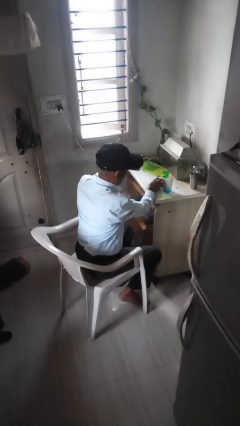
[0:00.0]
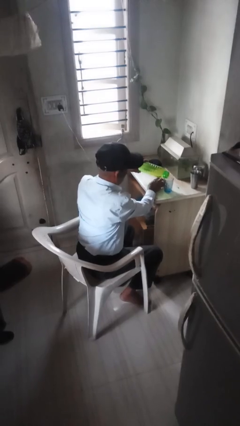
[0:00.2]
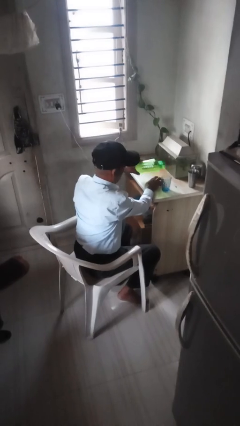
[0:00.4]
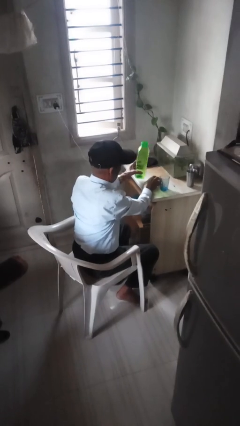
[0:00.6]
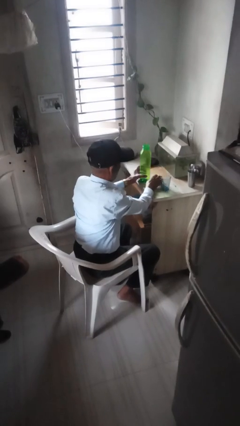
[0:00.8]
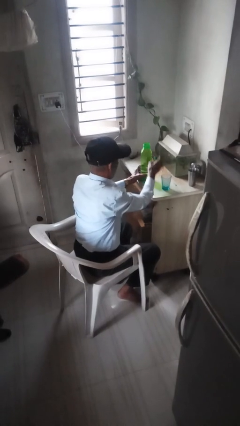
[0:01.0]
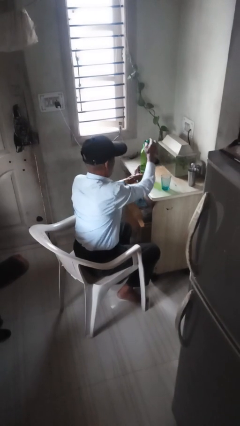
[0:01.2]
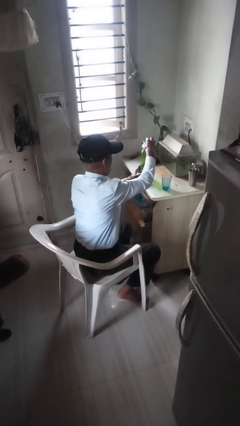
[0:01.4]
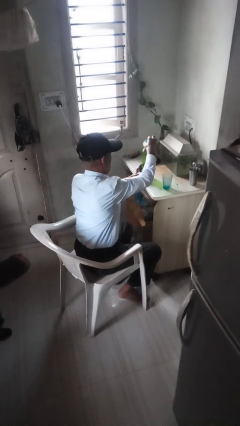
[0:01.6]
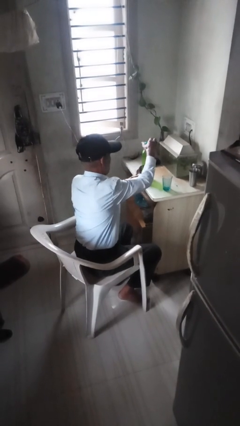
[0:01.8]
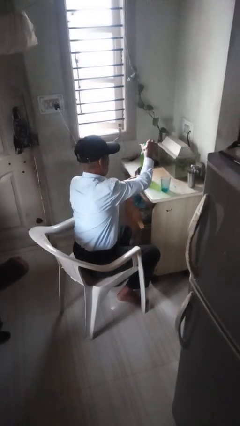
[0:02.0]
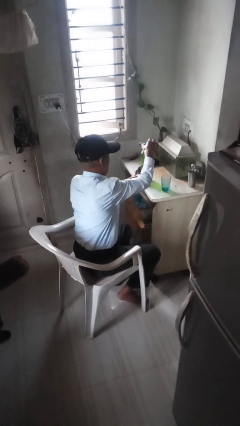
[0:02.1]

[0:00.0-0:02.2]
person screws lid to bottle

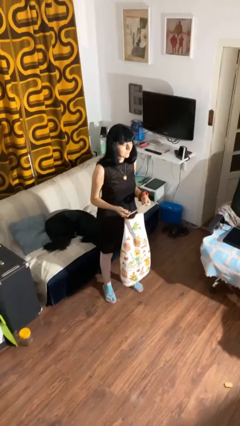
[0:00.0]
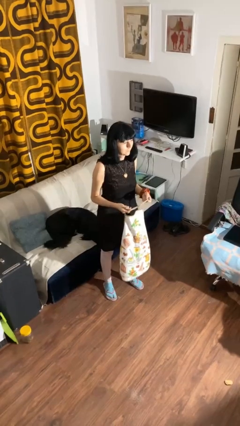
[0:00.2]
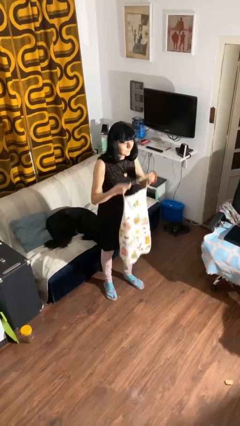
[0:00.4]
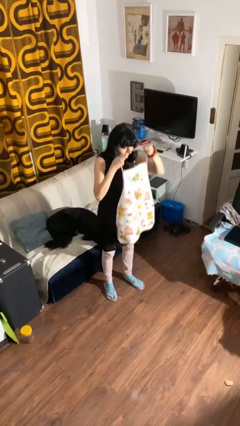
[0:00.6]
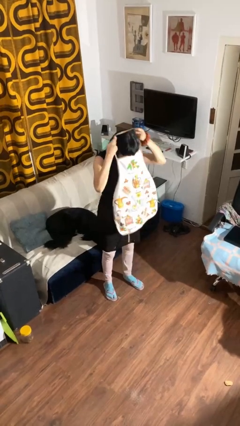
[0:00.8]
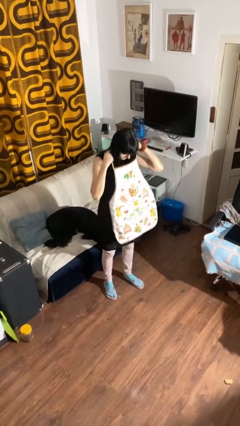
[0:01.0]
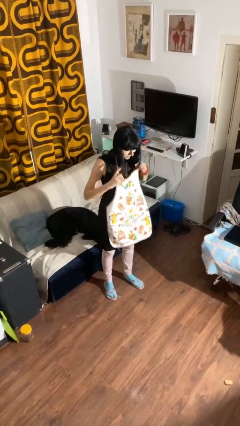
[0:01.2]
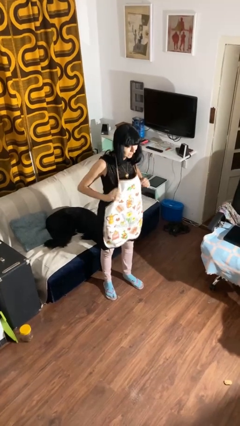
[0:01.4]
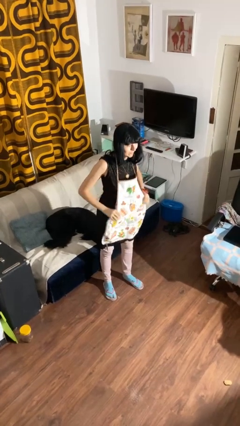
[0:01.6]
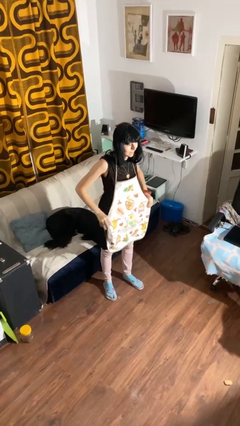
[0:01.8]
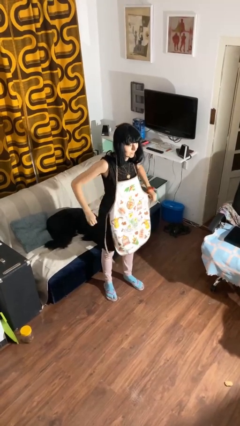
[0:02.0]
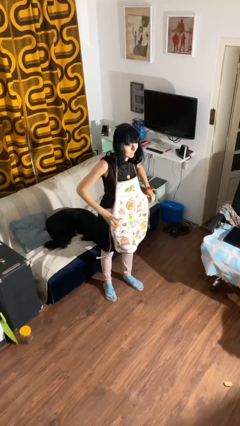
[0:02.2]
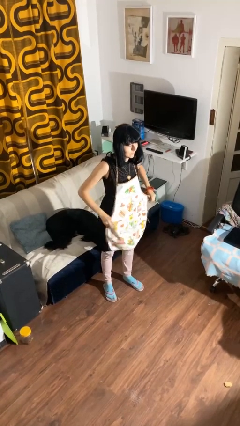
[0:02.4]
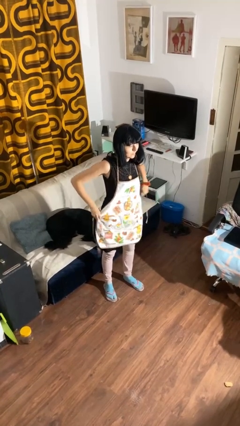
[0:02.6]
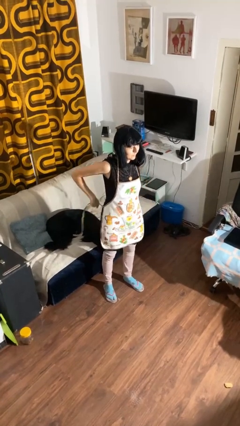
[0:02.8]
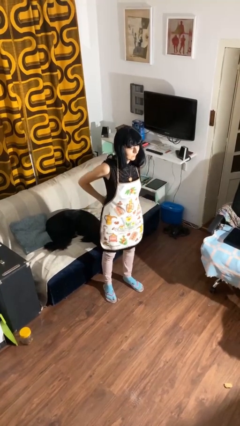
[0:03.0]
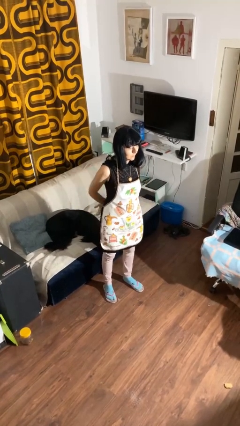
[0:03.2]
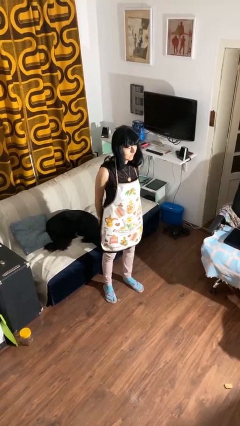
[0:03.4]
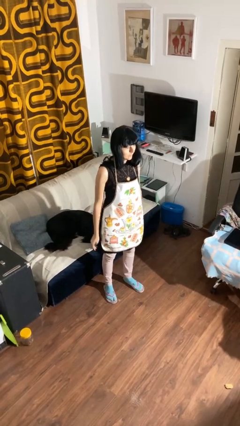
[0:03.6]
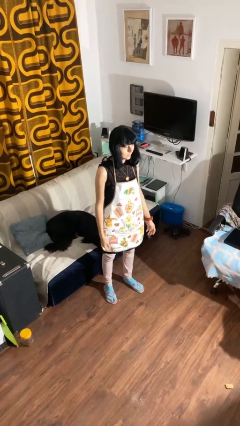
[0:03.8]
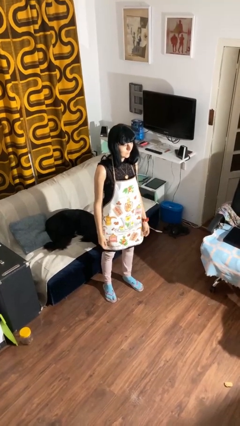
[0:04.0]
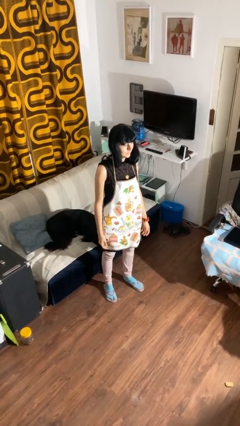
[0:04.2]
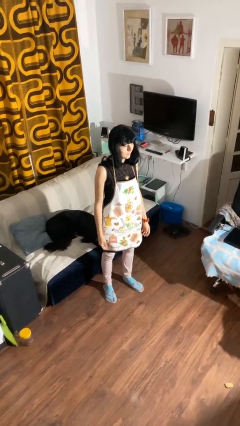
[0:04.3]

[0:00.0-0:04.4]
person puts on apron

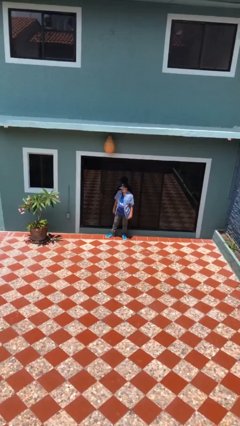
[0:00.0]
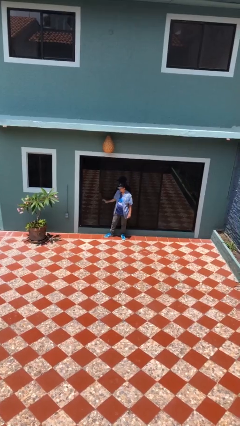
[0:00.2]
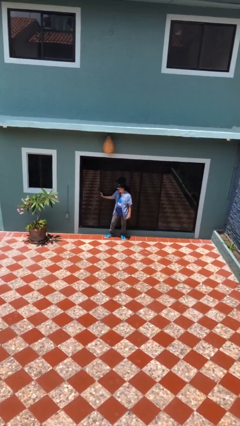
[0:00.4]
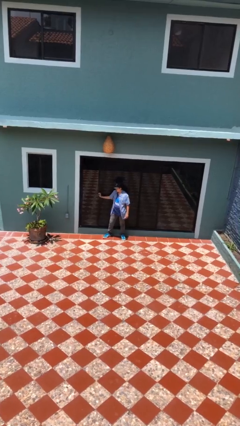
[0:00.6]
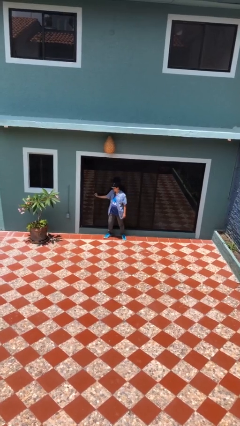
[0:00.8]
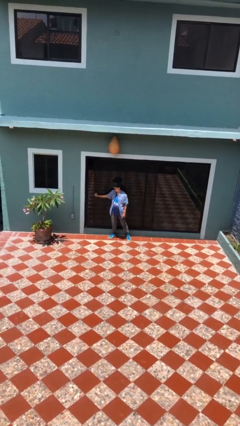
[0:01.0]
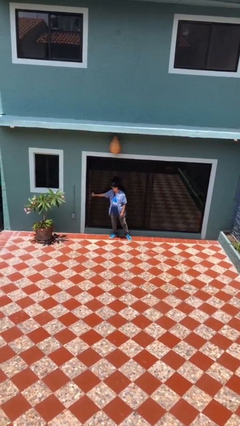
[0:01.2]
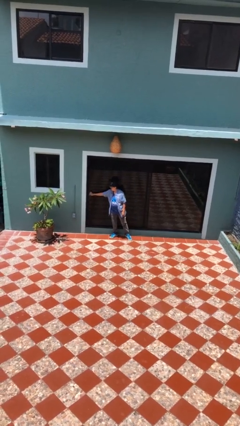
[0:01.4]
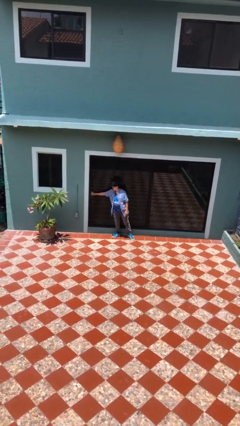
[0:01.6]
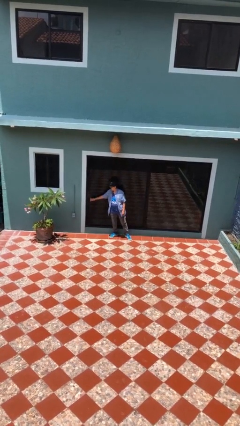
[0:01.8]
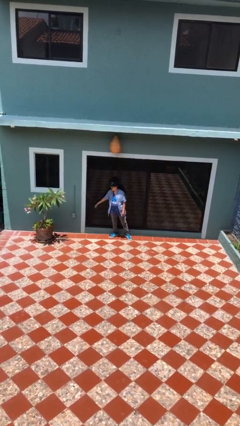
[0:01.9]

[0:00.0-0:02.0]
person closes sliding door

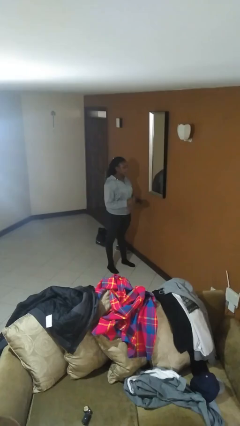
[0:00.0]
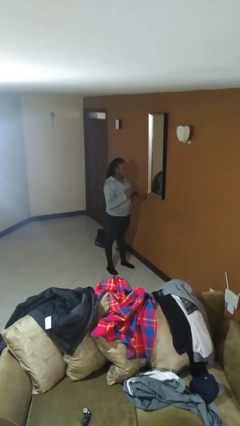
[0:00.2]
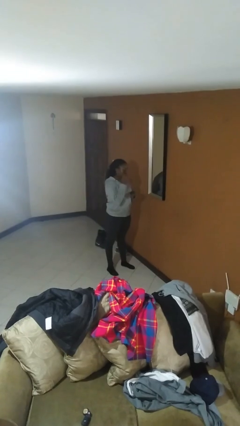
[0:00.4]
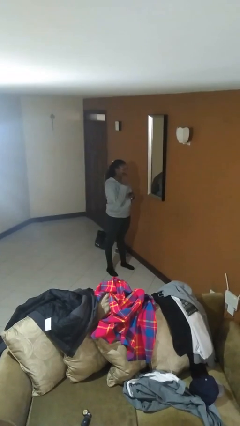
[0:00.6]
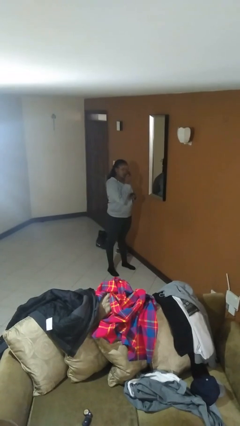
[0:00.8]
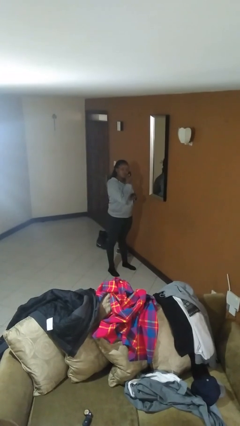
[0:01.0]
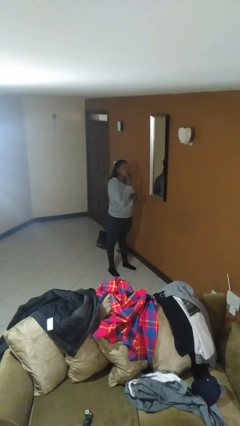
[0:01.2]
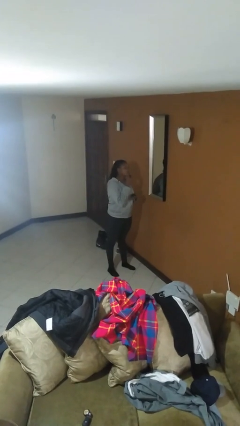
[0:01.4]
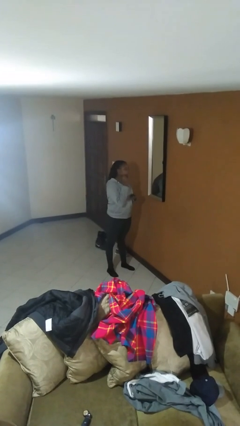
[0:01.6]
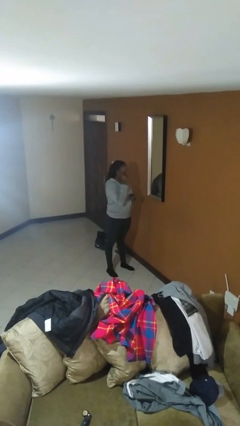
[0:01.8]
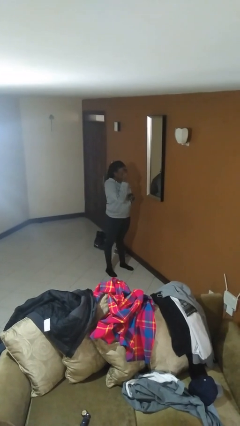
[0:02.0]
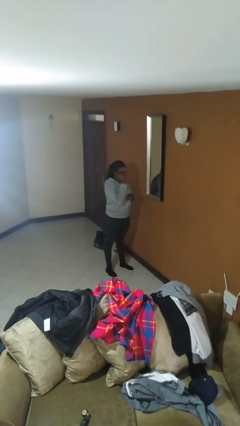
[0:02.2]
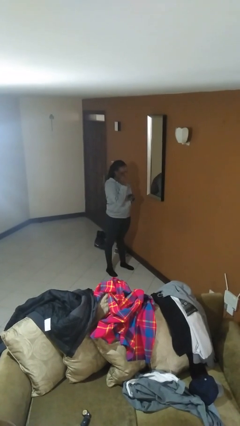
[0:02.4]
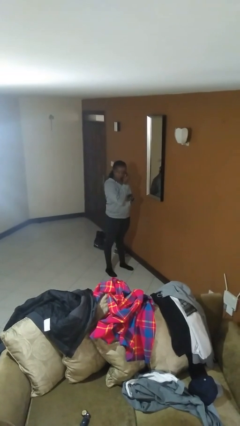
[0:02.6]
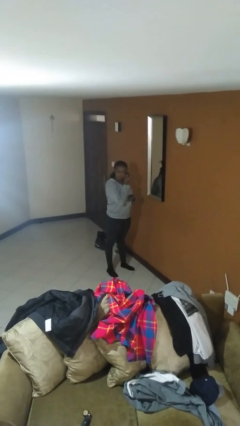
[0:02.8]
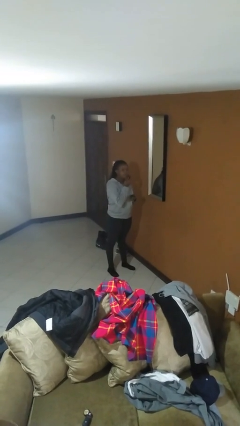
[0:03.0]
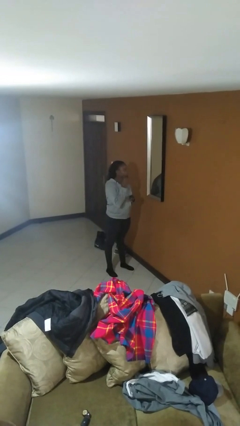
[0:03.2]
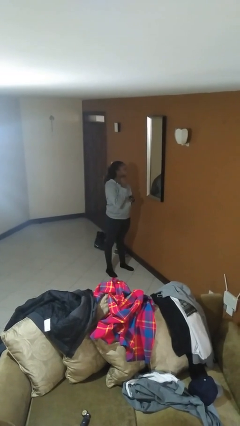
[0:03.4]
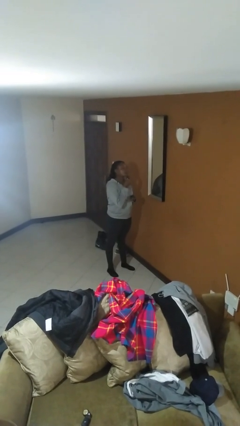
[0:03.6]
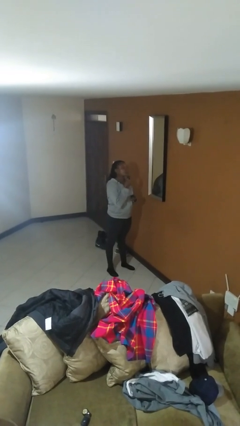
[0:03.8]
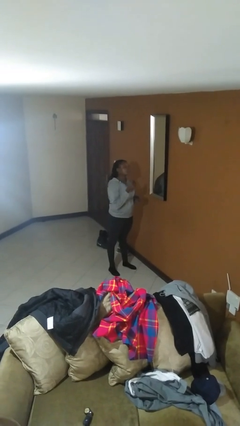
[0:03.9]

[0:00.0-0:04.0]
person applies foundation makeup

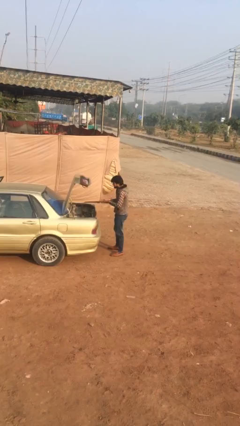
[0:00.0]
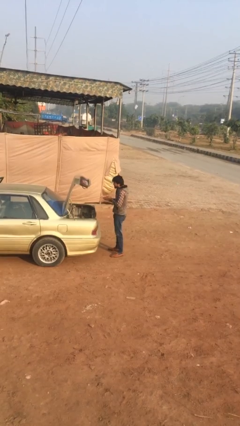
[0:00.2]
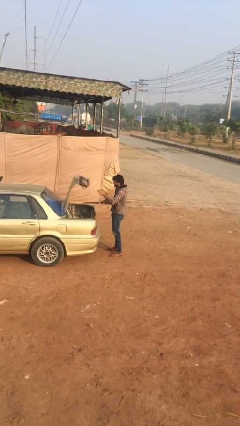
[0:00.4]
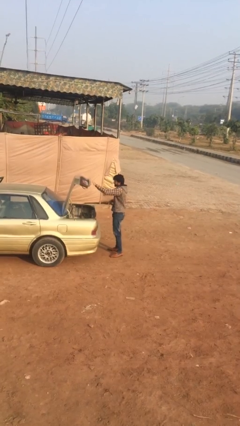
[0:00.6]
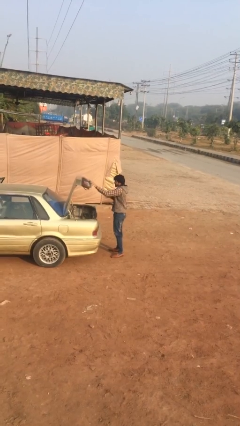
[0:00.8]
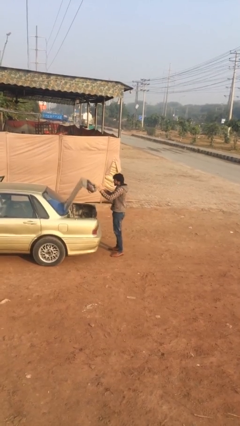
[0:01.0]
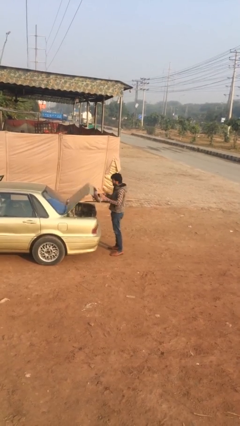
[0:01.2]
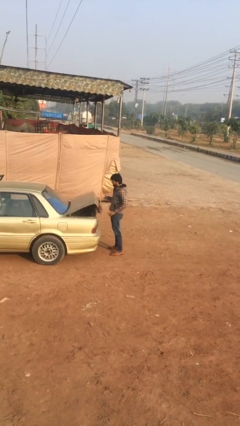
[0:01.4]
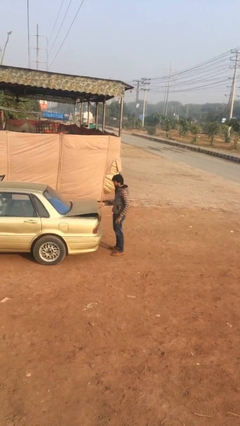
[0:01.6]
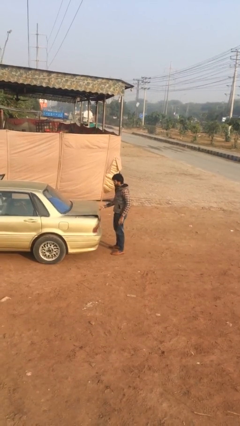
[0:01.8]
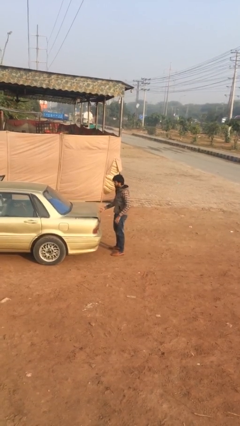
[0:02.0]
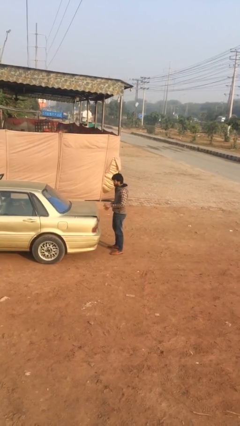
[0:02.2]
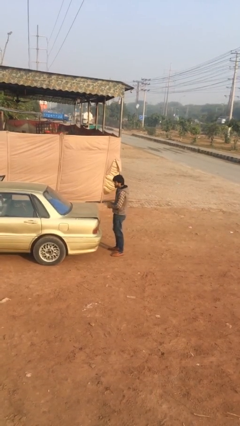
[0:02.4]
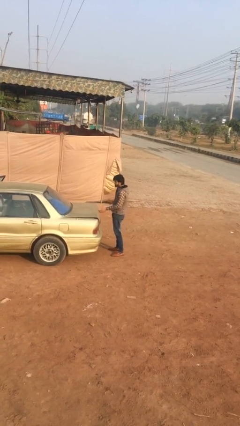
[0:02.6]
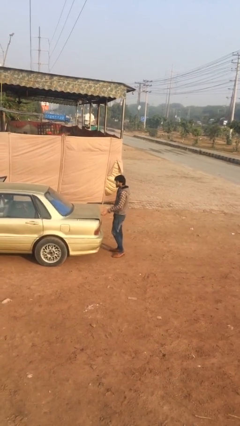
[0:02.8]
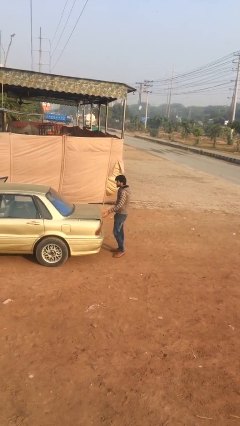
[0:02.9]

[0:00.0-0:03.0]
person closes car trunk

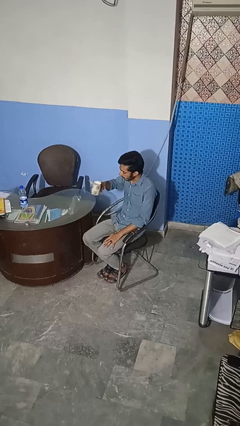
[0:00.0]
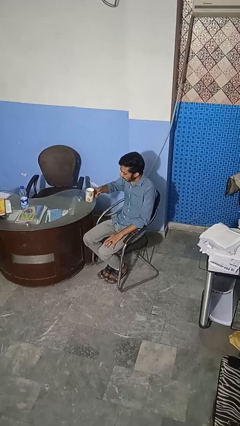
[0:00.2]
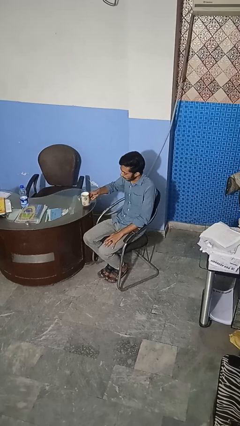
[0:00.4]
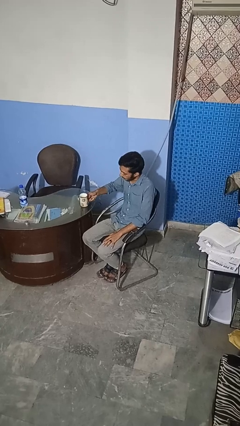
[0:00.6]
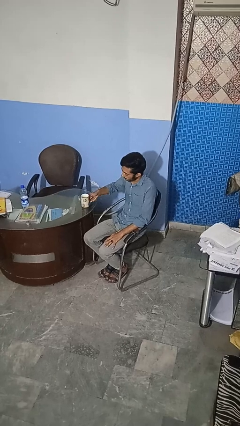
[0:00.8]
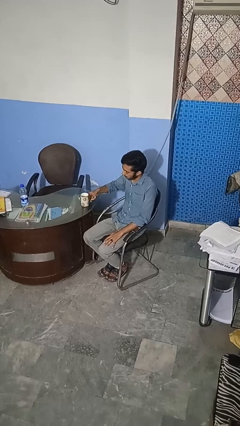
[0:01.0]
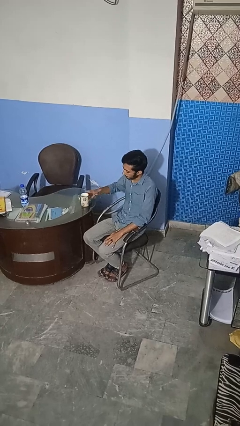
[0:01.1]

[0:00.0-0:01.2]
person puts down object on table

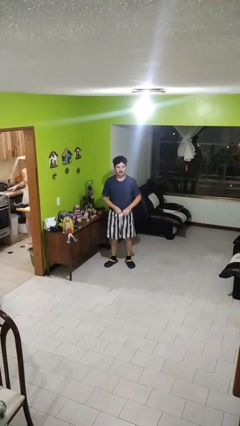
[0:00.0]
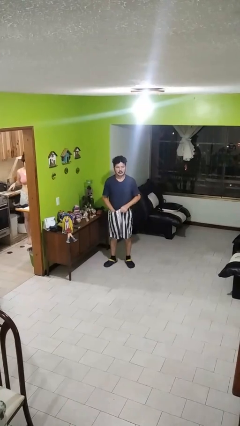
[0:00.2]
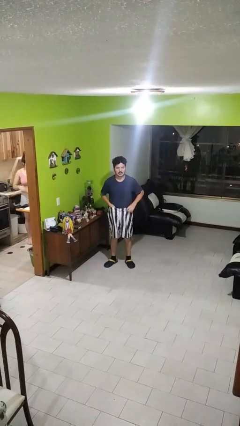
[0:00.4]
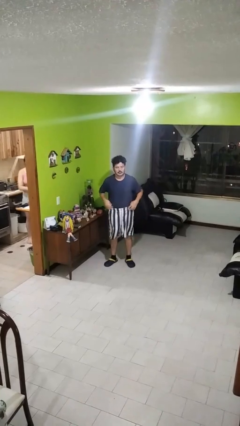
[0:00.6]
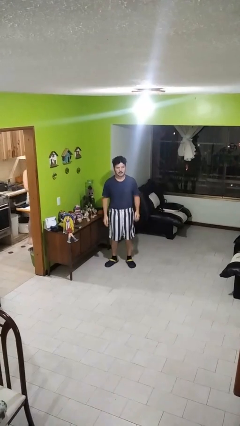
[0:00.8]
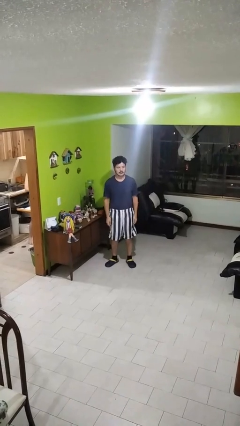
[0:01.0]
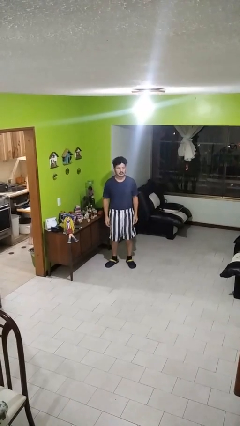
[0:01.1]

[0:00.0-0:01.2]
person tucks in shirt
